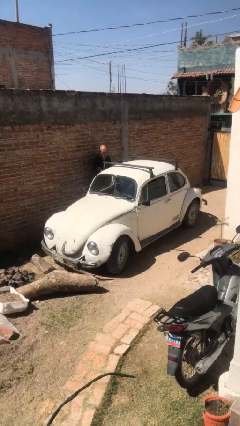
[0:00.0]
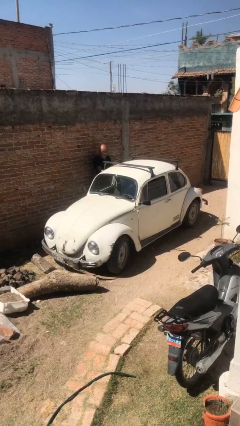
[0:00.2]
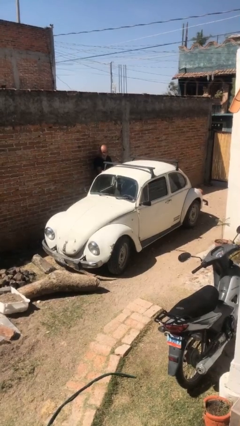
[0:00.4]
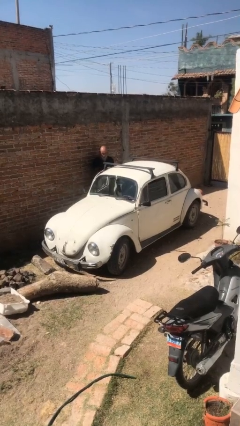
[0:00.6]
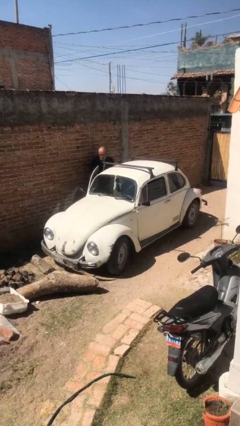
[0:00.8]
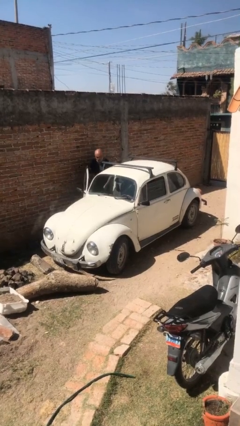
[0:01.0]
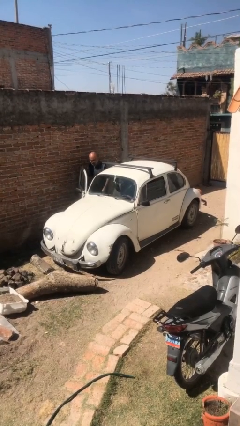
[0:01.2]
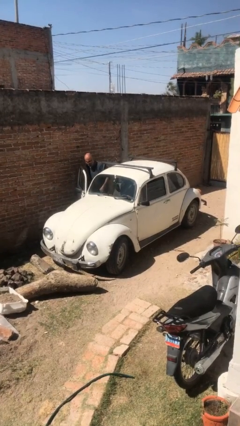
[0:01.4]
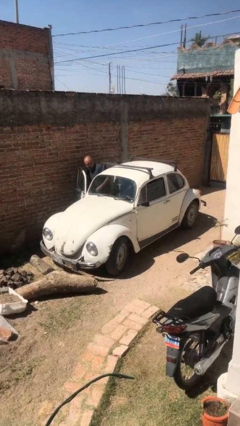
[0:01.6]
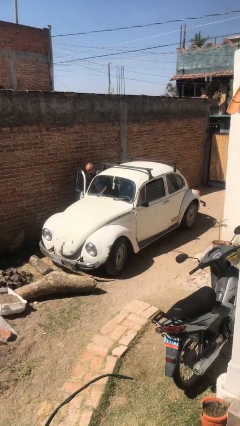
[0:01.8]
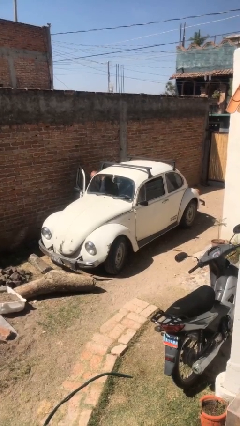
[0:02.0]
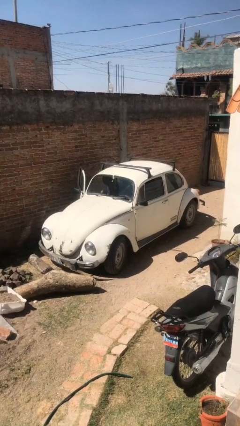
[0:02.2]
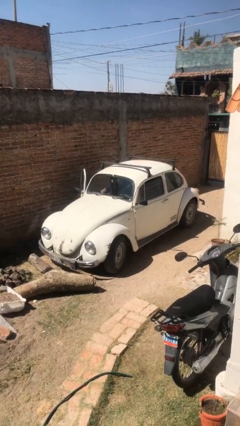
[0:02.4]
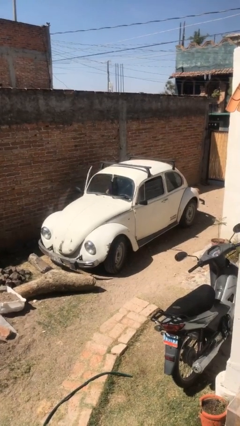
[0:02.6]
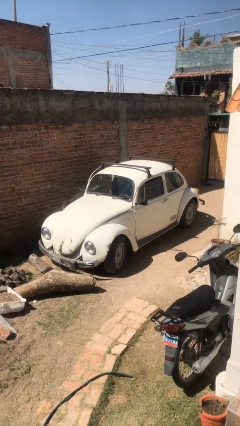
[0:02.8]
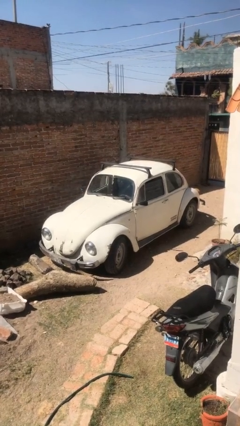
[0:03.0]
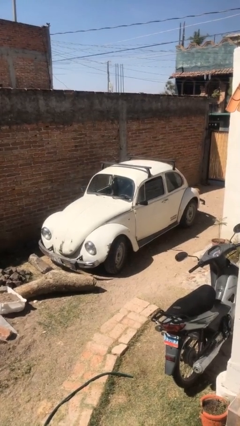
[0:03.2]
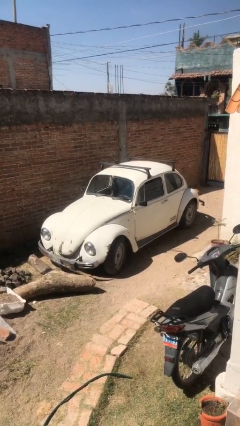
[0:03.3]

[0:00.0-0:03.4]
car picks up person

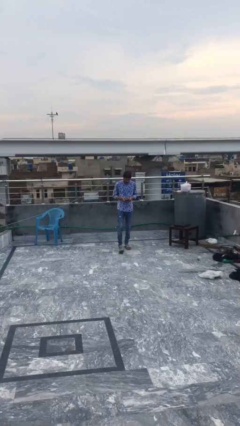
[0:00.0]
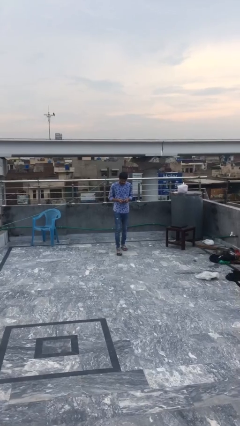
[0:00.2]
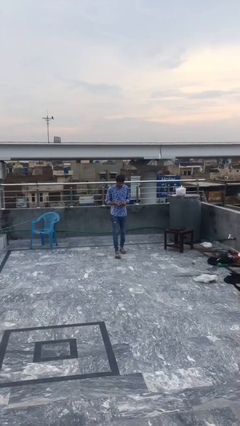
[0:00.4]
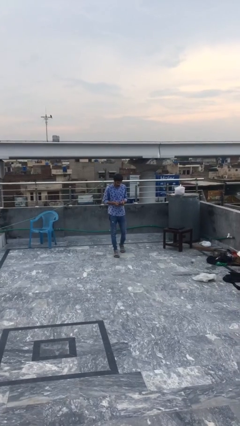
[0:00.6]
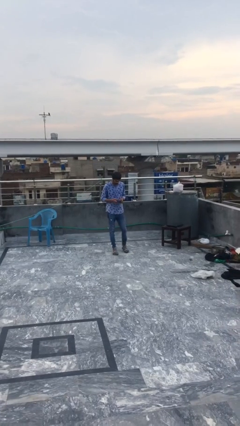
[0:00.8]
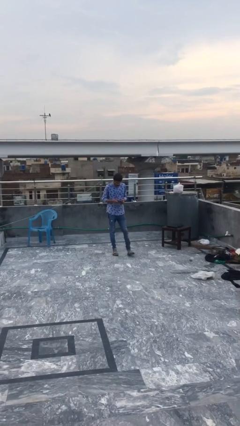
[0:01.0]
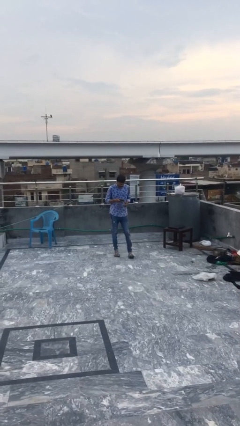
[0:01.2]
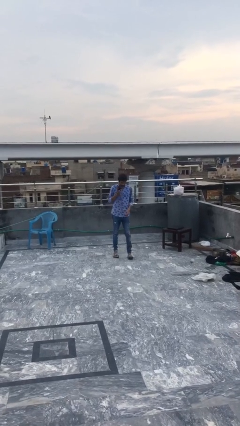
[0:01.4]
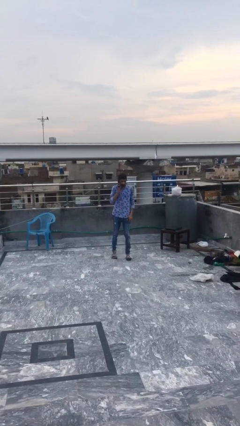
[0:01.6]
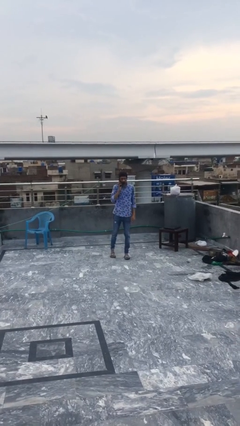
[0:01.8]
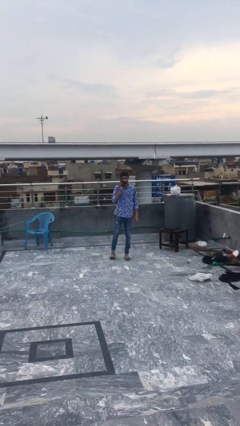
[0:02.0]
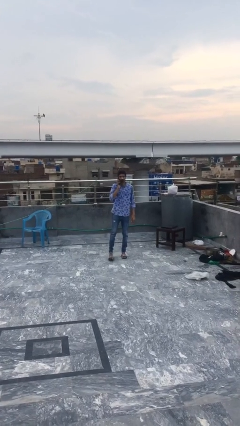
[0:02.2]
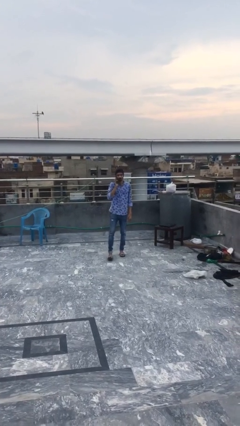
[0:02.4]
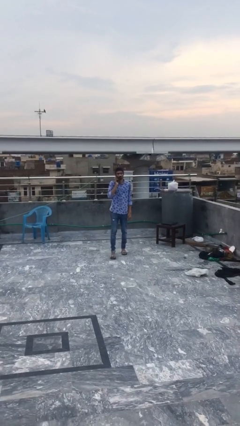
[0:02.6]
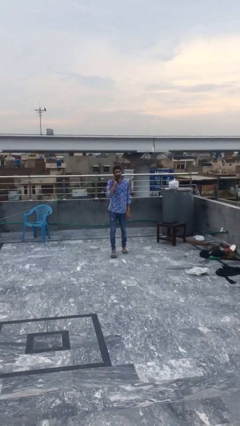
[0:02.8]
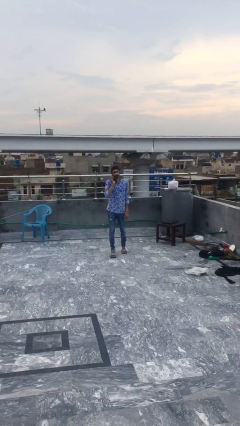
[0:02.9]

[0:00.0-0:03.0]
person talks on phone

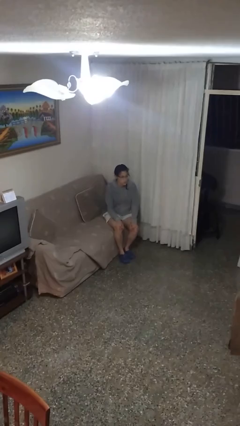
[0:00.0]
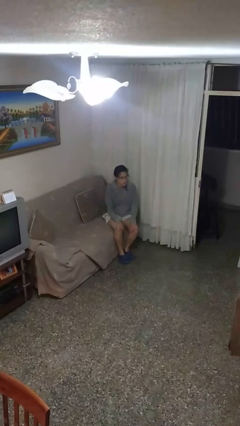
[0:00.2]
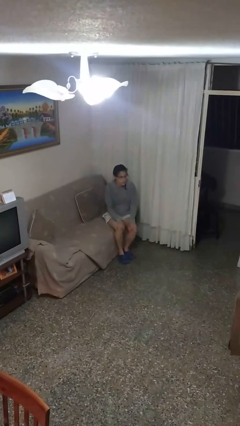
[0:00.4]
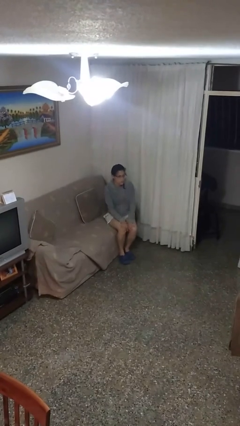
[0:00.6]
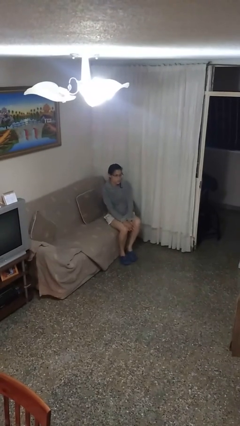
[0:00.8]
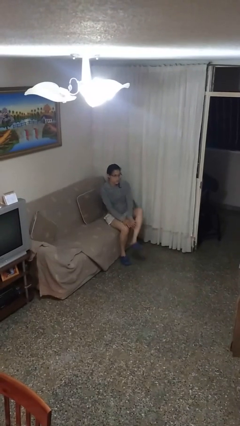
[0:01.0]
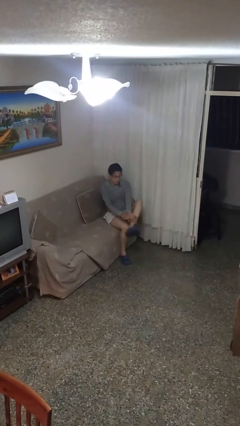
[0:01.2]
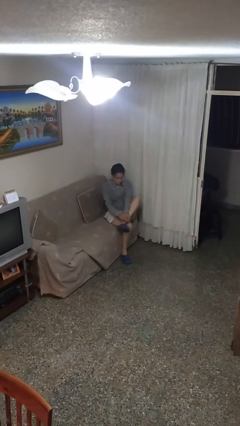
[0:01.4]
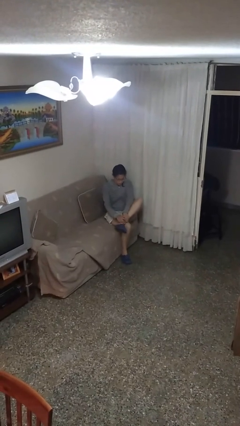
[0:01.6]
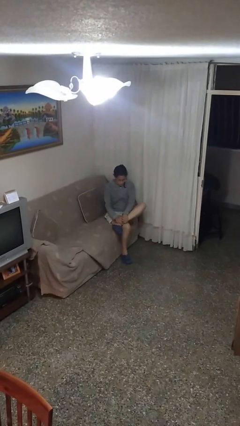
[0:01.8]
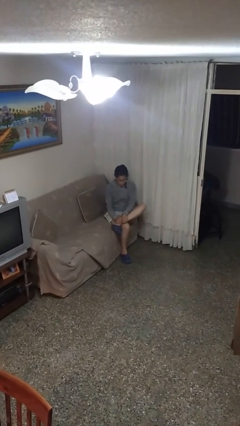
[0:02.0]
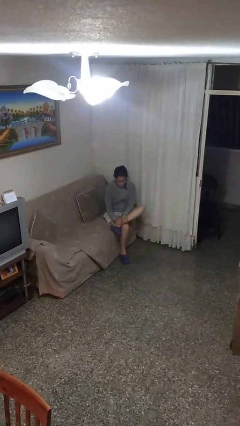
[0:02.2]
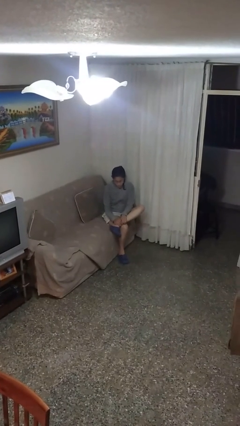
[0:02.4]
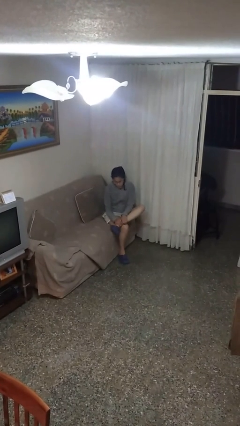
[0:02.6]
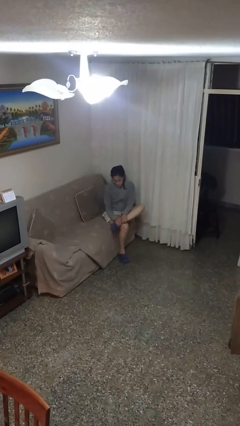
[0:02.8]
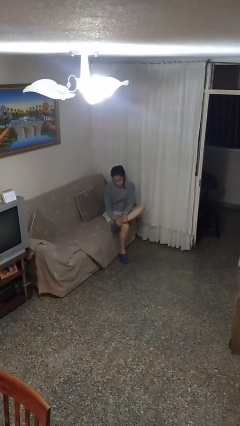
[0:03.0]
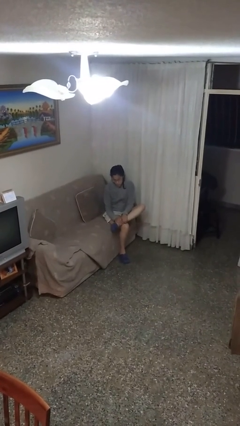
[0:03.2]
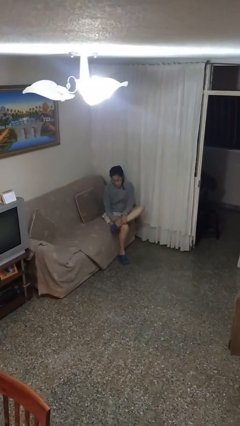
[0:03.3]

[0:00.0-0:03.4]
person crosses legs

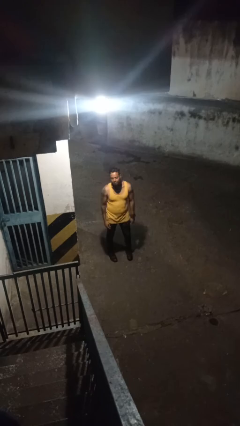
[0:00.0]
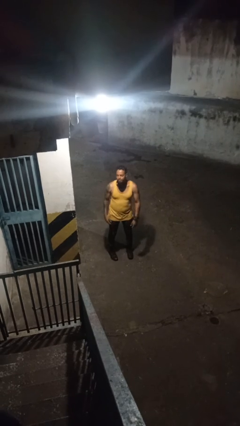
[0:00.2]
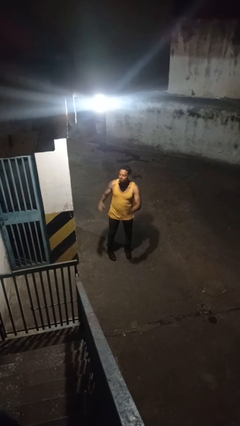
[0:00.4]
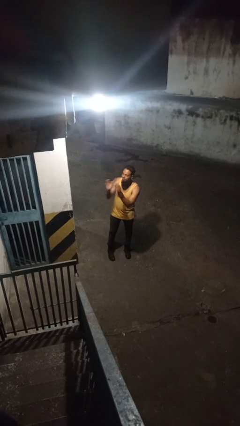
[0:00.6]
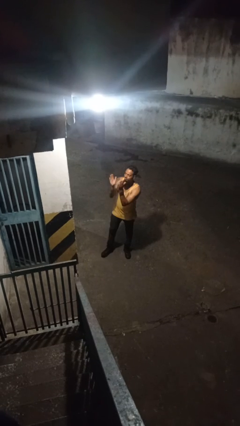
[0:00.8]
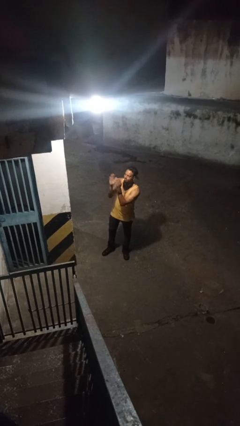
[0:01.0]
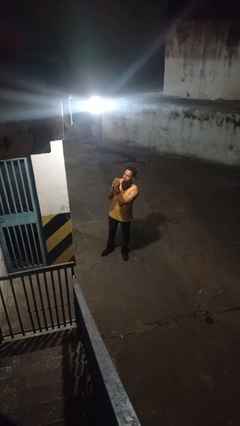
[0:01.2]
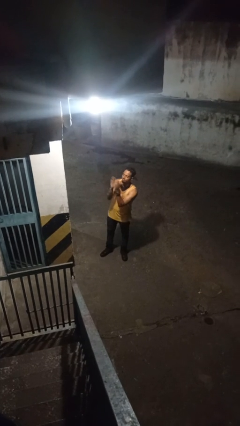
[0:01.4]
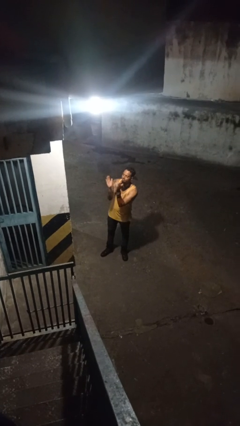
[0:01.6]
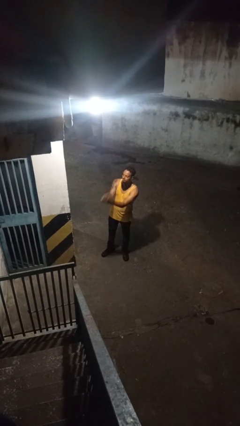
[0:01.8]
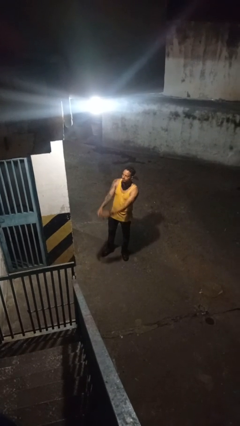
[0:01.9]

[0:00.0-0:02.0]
person claps hands

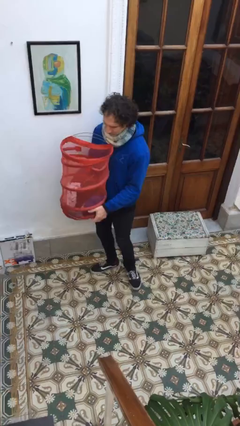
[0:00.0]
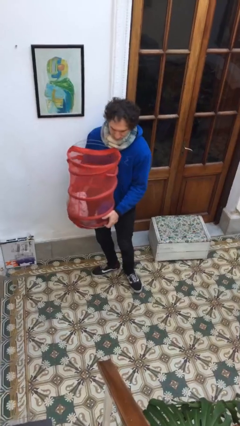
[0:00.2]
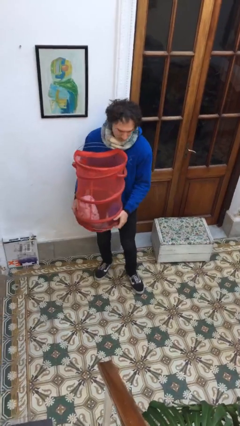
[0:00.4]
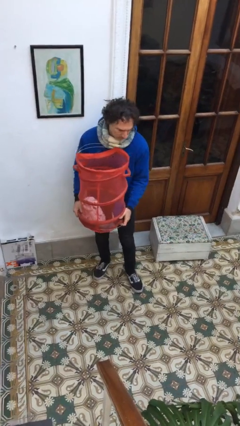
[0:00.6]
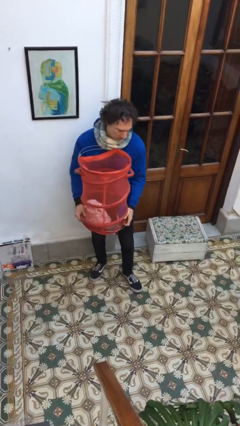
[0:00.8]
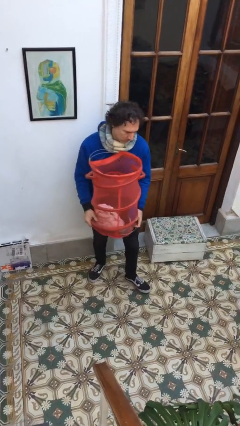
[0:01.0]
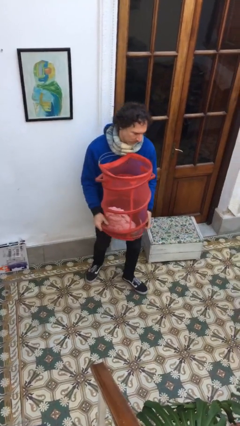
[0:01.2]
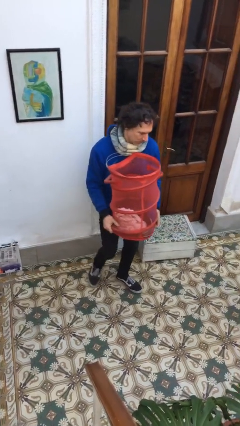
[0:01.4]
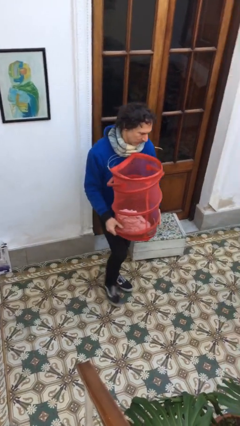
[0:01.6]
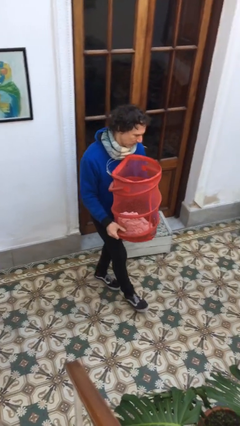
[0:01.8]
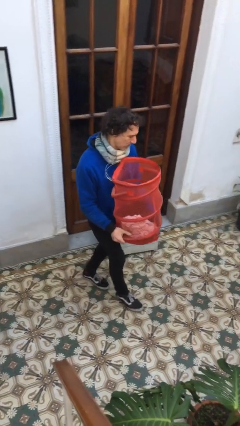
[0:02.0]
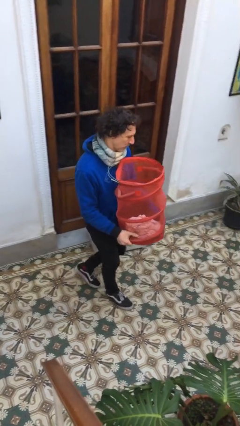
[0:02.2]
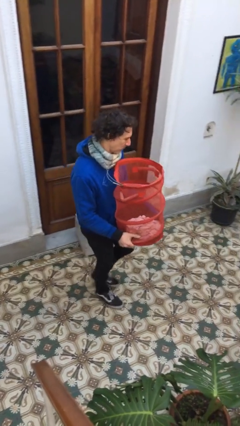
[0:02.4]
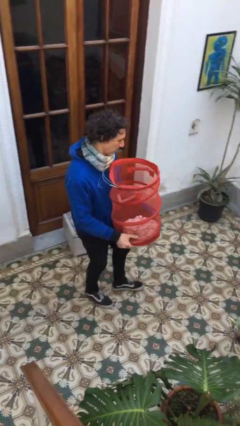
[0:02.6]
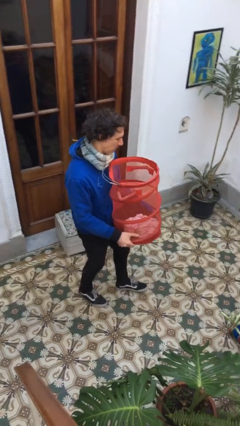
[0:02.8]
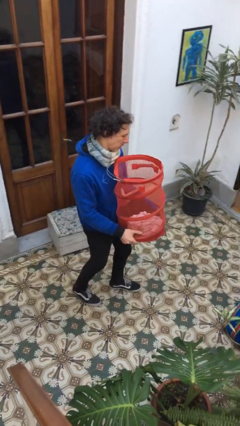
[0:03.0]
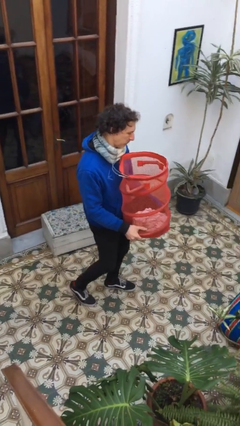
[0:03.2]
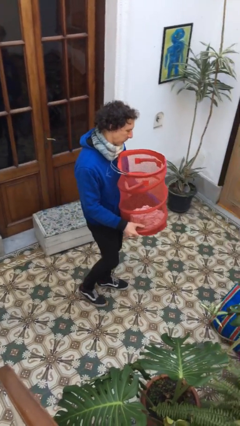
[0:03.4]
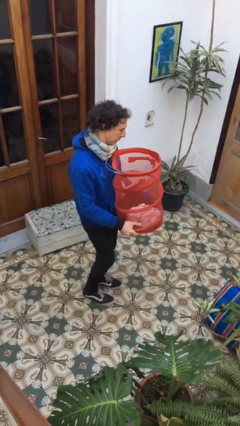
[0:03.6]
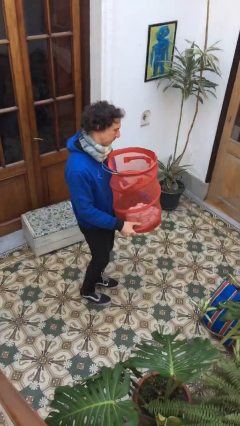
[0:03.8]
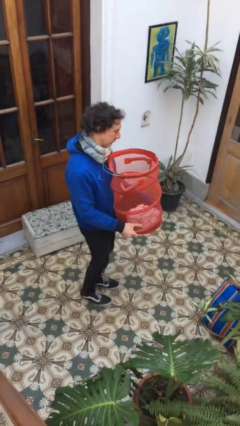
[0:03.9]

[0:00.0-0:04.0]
person carries laundry basket

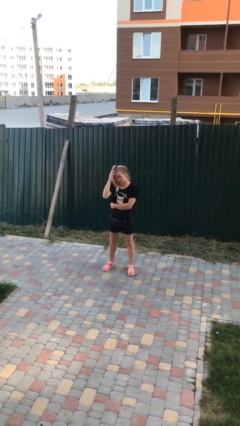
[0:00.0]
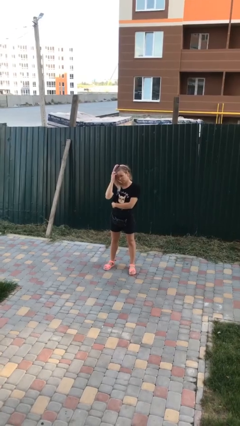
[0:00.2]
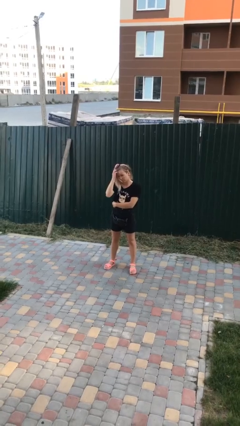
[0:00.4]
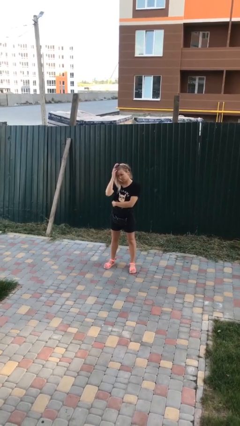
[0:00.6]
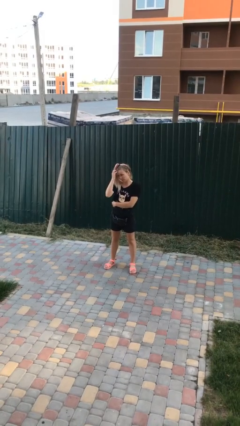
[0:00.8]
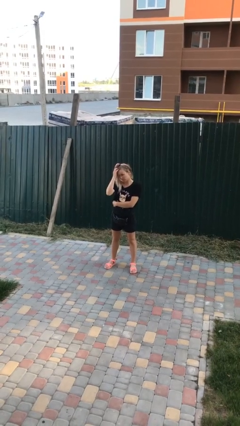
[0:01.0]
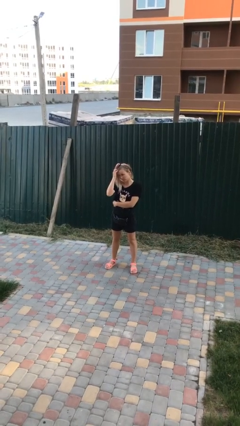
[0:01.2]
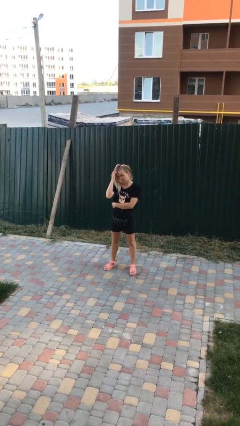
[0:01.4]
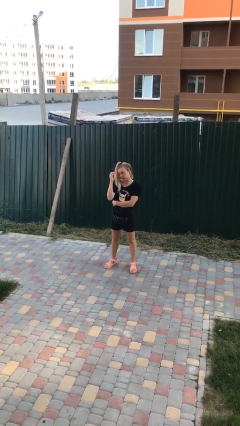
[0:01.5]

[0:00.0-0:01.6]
person scratches face
